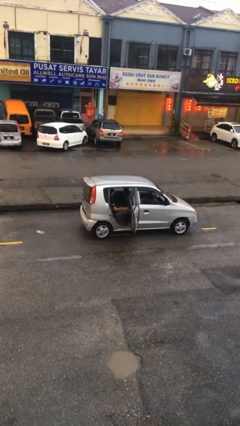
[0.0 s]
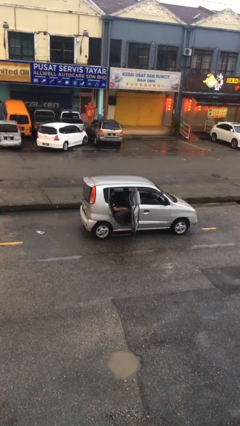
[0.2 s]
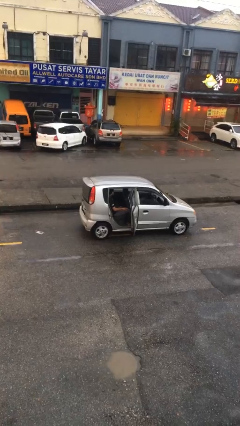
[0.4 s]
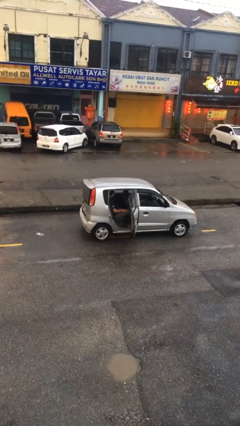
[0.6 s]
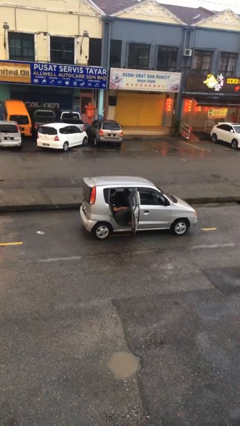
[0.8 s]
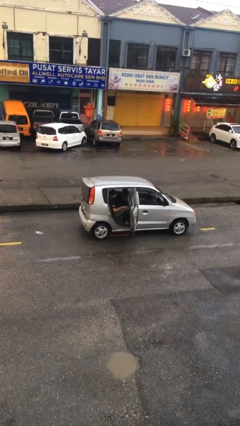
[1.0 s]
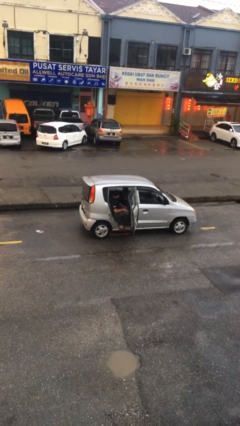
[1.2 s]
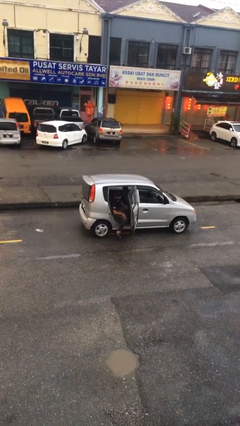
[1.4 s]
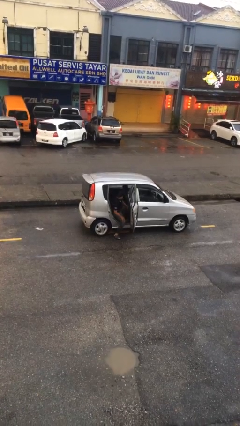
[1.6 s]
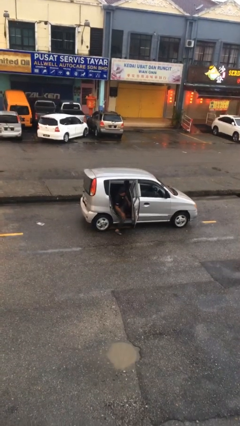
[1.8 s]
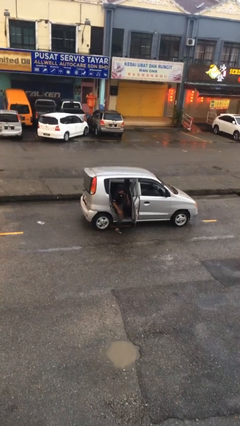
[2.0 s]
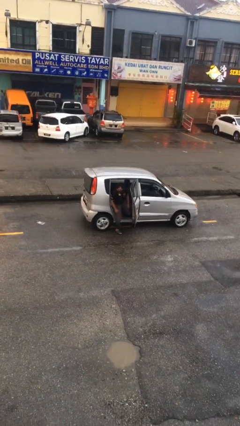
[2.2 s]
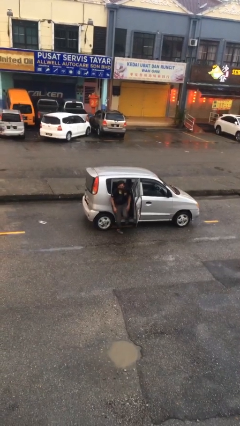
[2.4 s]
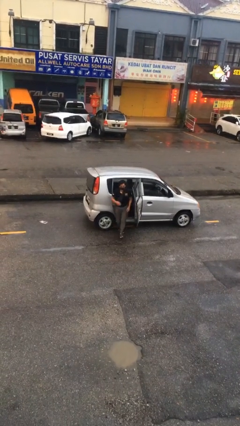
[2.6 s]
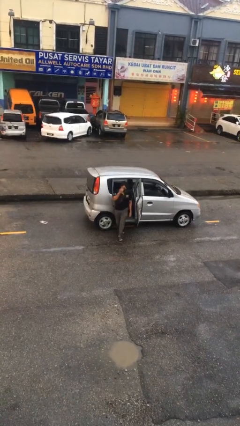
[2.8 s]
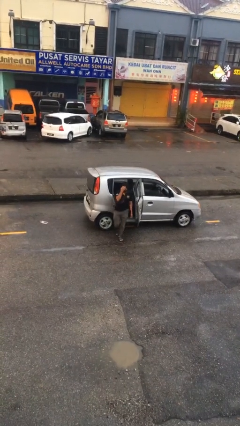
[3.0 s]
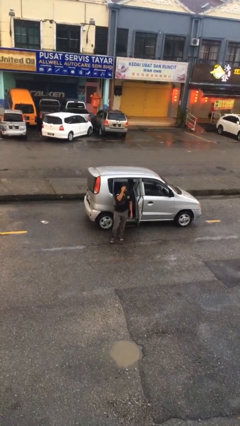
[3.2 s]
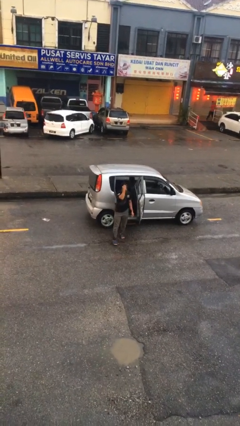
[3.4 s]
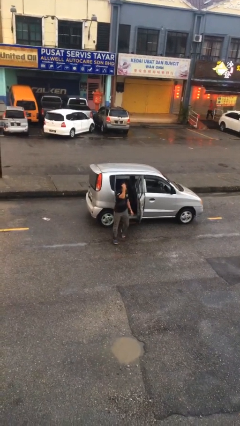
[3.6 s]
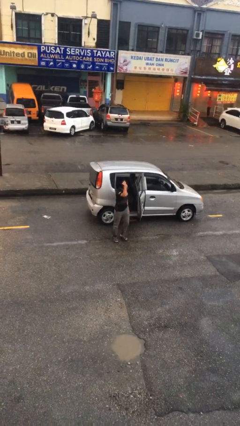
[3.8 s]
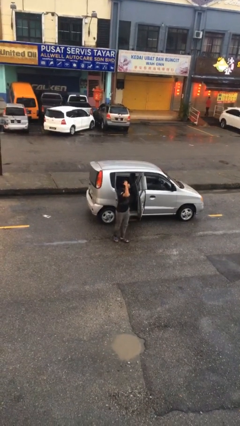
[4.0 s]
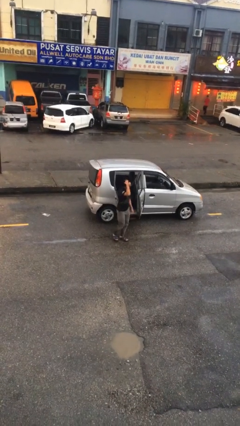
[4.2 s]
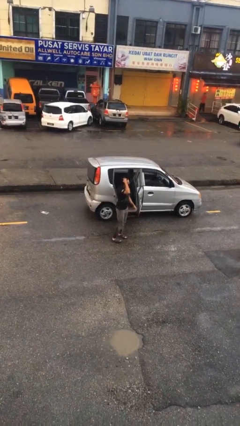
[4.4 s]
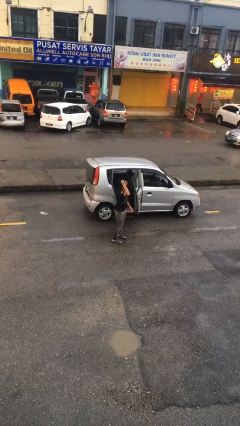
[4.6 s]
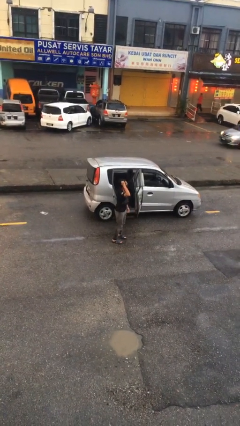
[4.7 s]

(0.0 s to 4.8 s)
person exits car

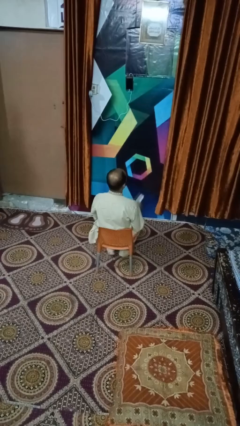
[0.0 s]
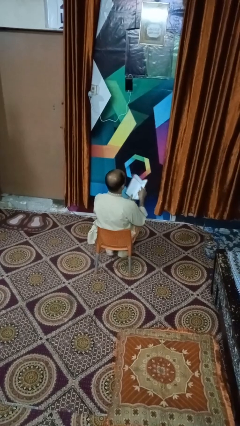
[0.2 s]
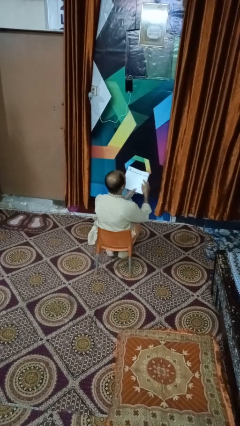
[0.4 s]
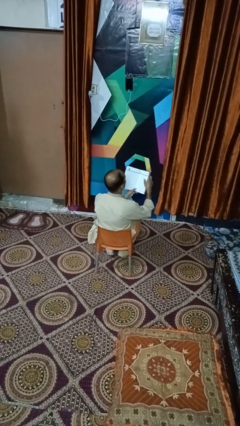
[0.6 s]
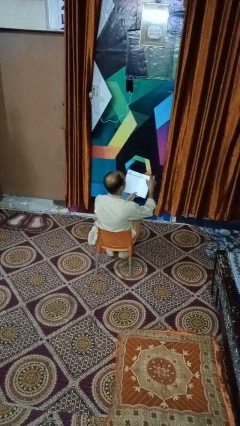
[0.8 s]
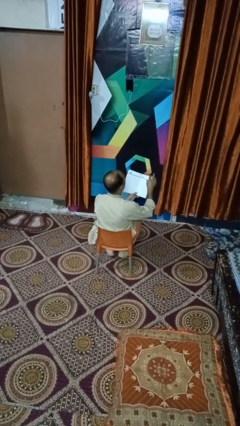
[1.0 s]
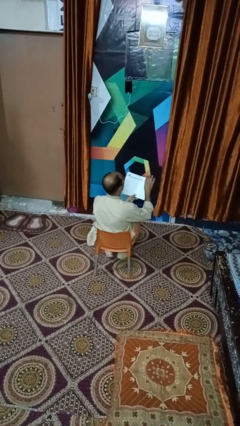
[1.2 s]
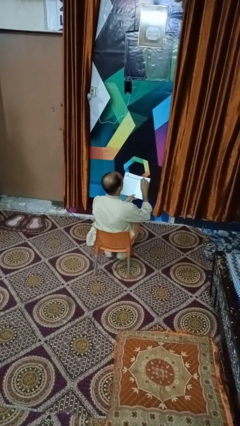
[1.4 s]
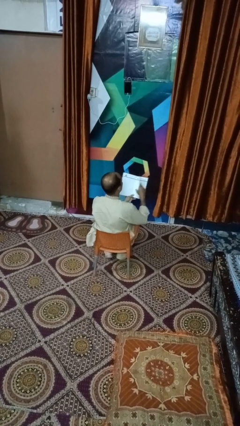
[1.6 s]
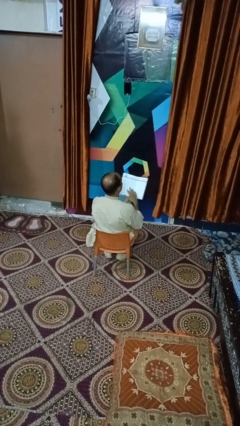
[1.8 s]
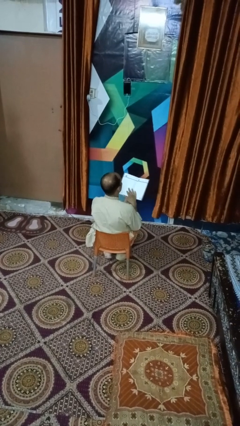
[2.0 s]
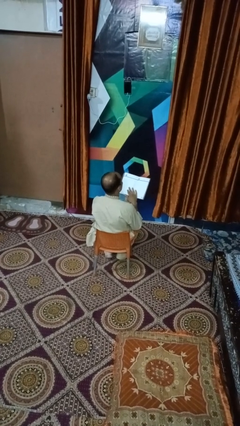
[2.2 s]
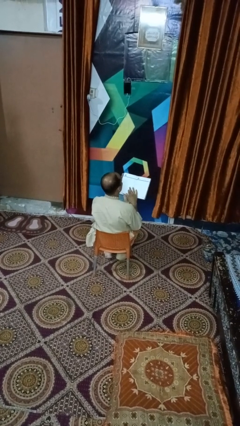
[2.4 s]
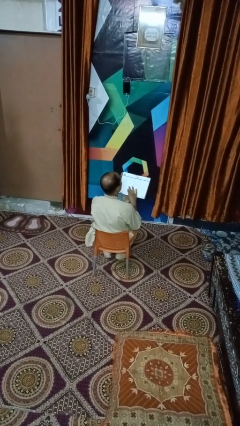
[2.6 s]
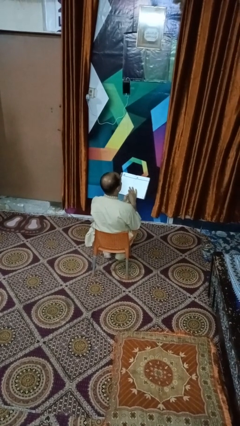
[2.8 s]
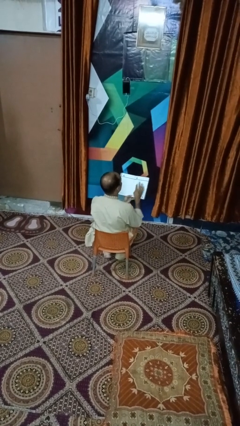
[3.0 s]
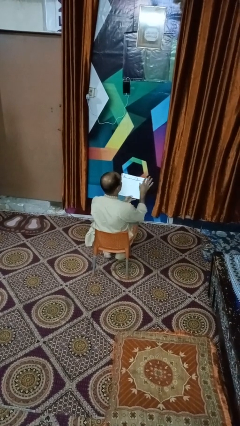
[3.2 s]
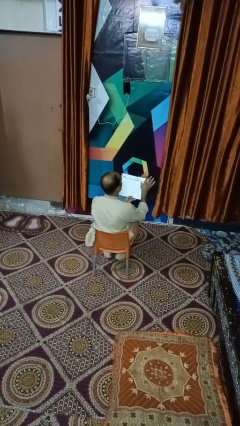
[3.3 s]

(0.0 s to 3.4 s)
person reads magazine

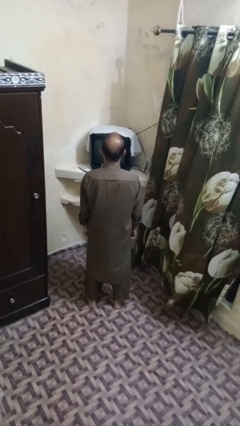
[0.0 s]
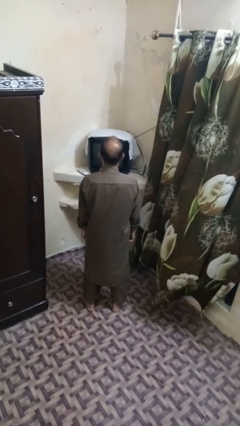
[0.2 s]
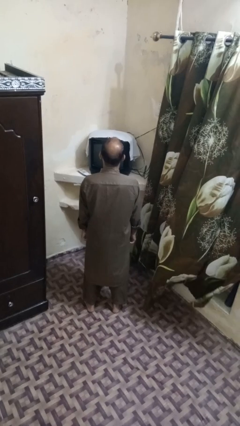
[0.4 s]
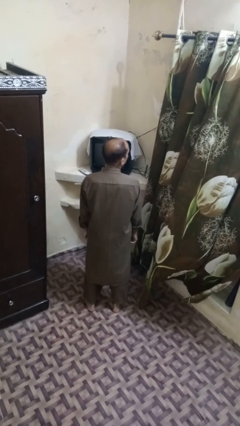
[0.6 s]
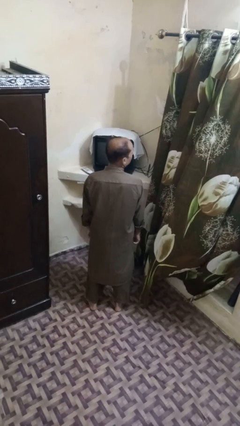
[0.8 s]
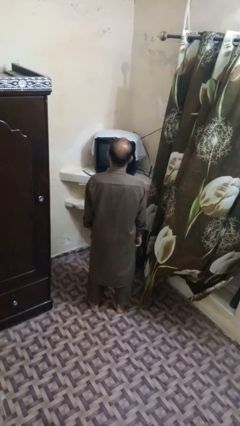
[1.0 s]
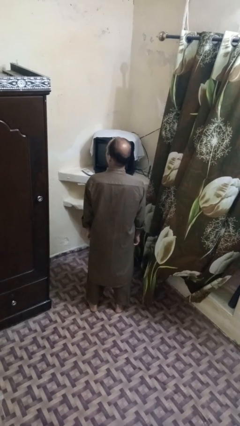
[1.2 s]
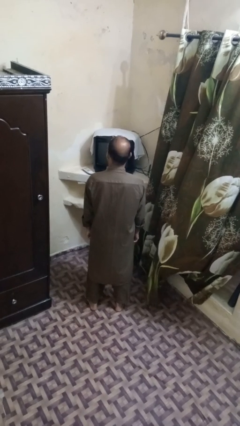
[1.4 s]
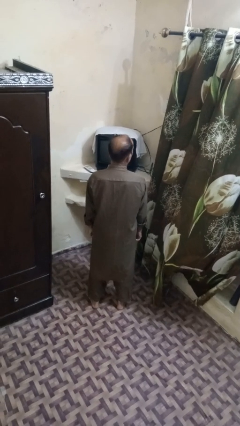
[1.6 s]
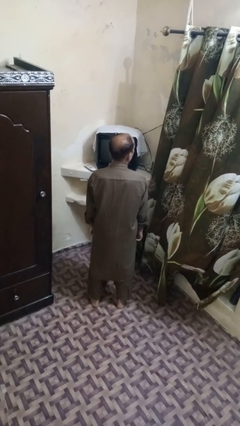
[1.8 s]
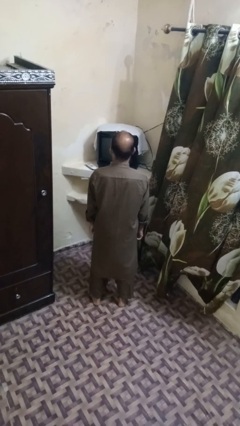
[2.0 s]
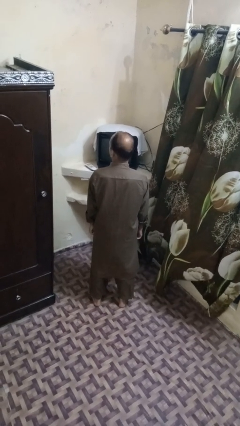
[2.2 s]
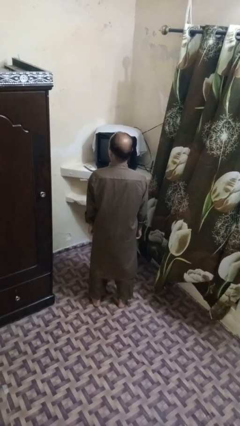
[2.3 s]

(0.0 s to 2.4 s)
person shakes head

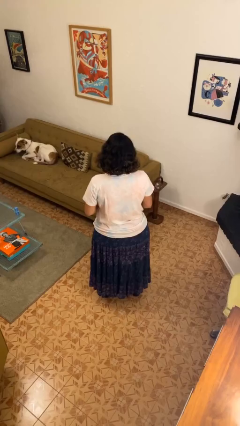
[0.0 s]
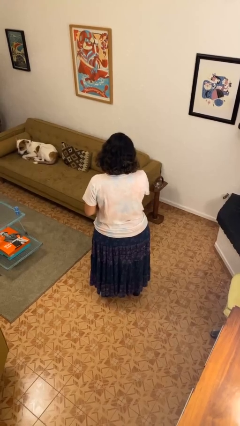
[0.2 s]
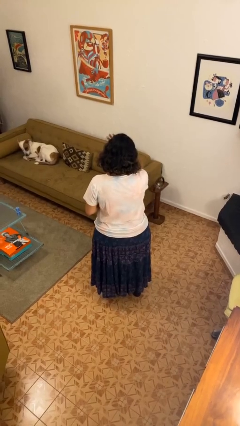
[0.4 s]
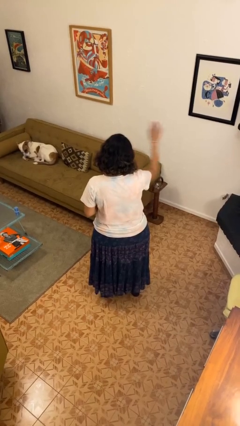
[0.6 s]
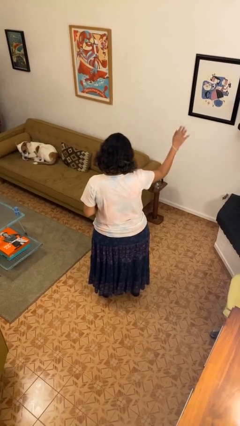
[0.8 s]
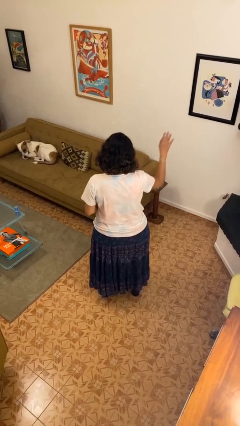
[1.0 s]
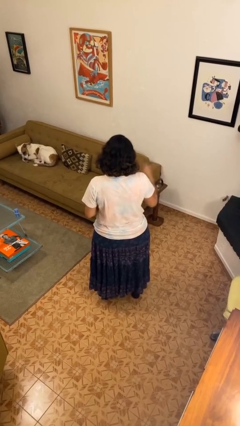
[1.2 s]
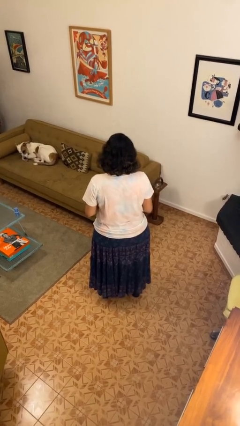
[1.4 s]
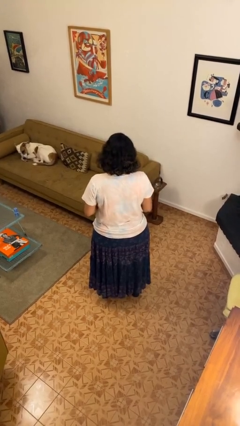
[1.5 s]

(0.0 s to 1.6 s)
person gestures swipe right

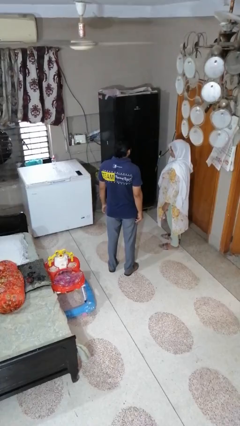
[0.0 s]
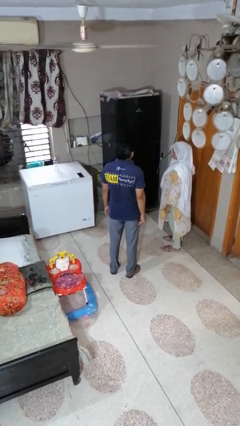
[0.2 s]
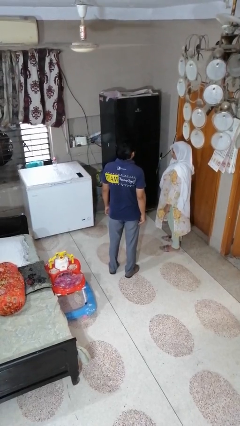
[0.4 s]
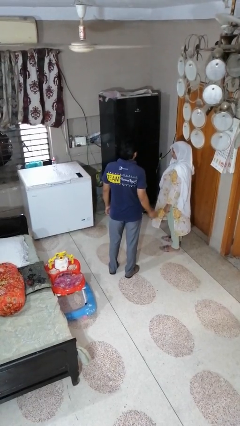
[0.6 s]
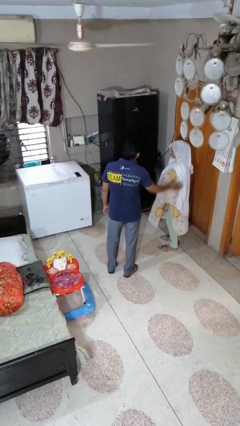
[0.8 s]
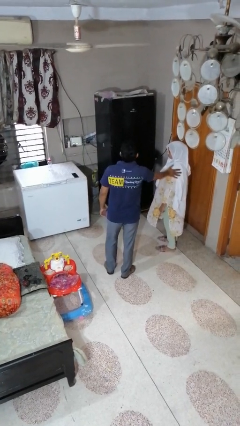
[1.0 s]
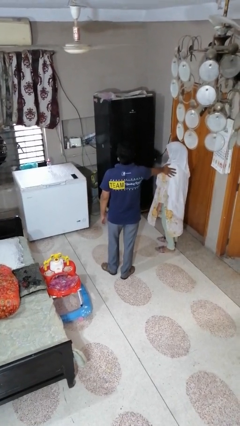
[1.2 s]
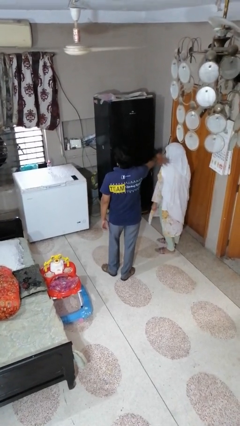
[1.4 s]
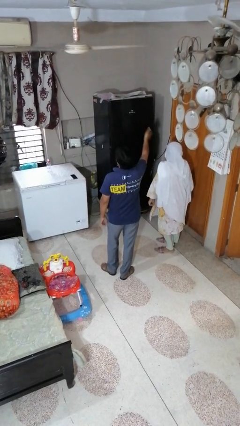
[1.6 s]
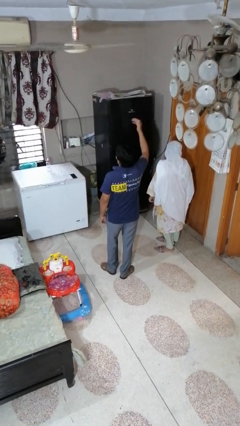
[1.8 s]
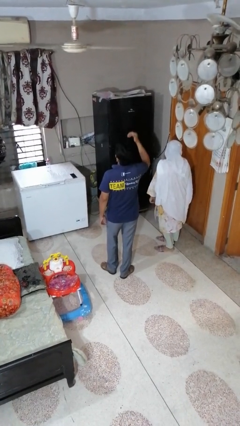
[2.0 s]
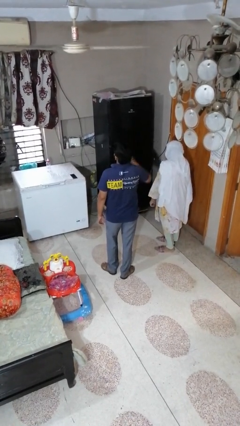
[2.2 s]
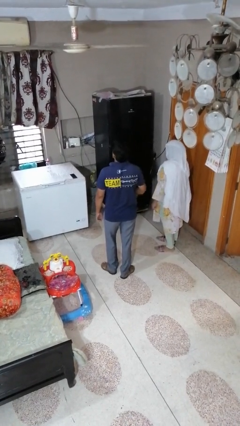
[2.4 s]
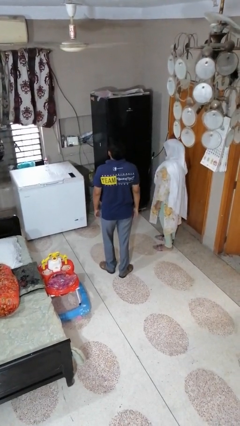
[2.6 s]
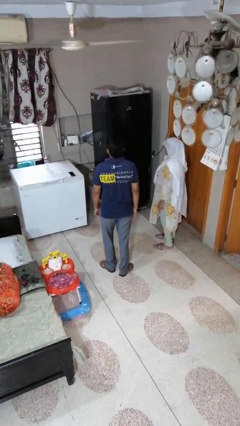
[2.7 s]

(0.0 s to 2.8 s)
person shoves person

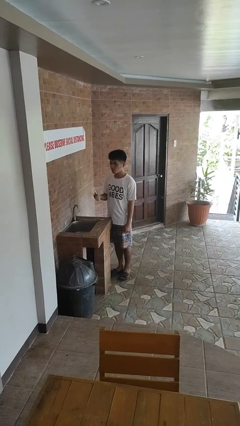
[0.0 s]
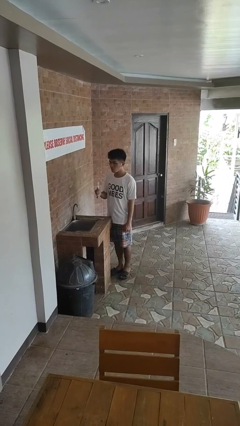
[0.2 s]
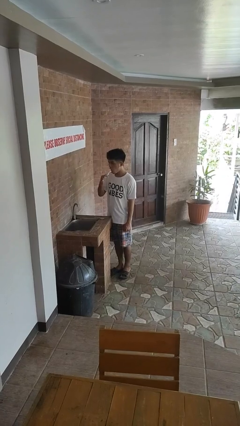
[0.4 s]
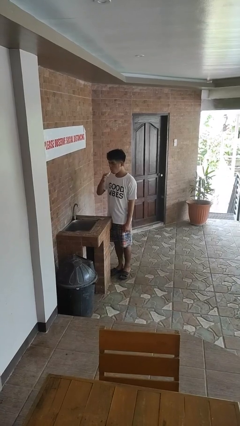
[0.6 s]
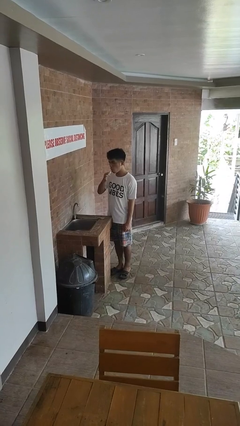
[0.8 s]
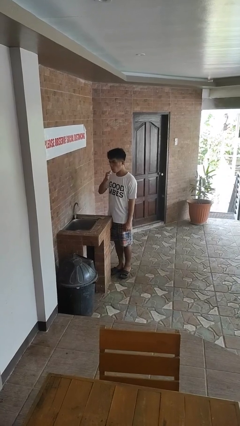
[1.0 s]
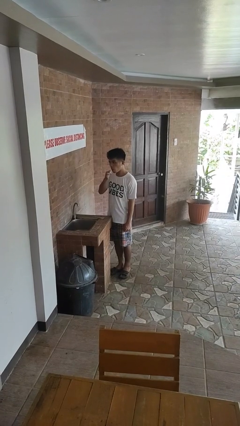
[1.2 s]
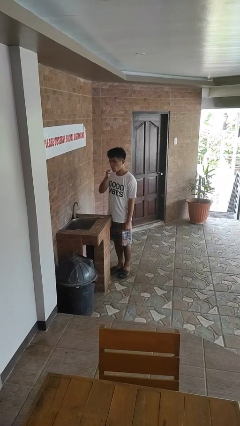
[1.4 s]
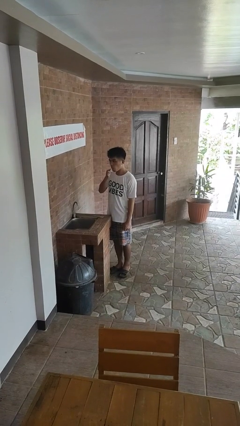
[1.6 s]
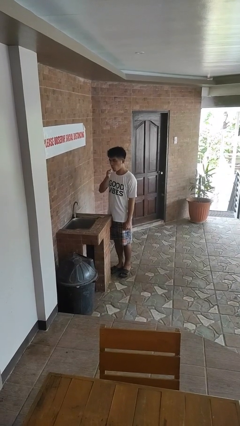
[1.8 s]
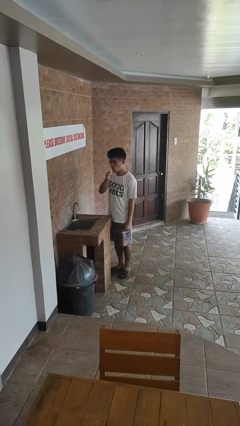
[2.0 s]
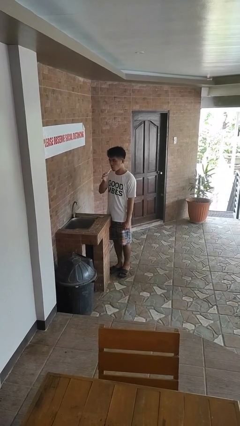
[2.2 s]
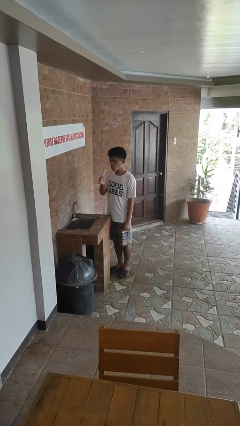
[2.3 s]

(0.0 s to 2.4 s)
person brushes teeth

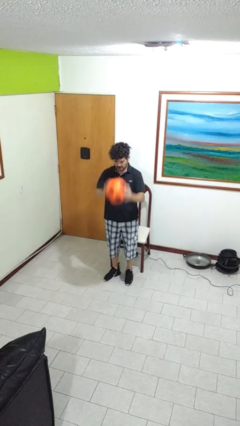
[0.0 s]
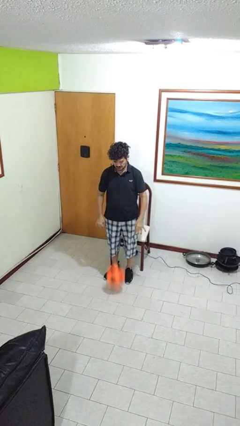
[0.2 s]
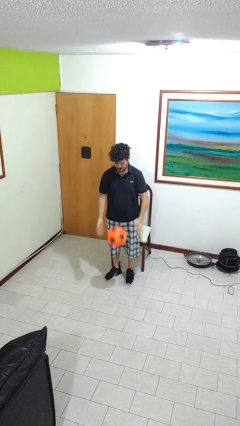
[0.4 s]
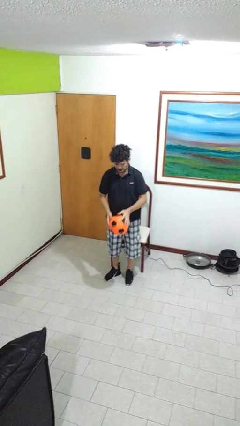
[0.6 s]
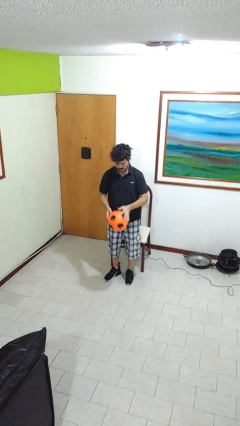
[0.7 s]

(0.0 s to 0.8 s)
person bounces ball on floor
